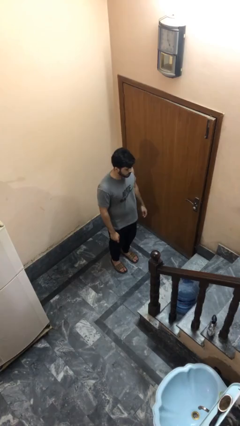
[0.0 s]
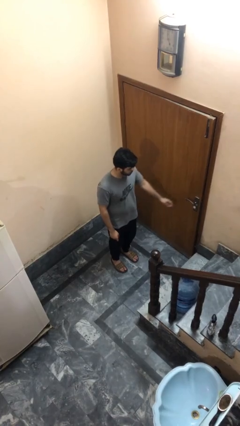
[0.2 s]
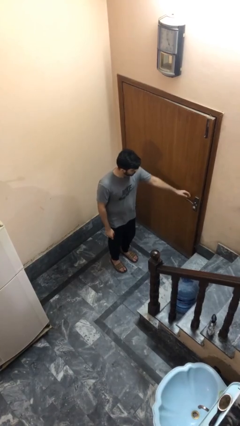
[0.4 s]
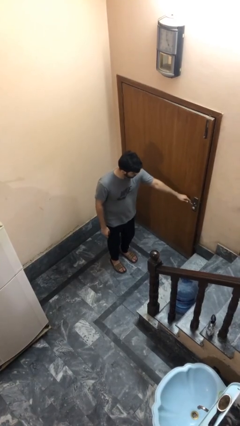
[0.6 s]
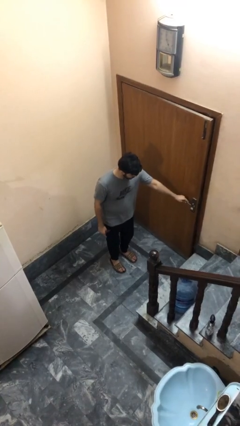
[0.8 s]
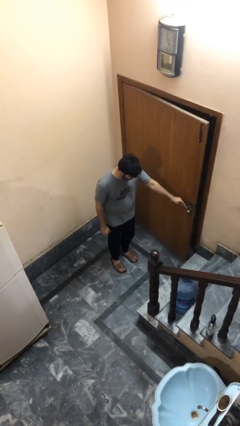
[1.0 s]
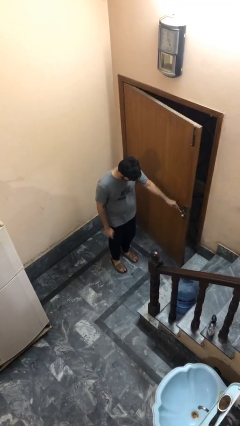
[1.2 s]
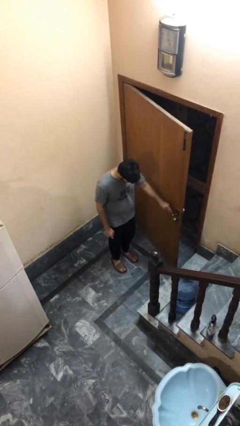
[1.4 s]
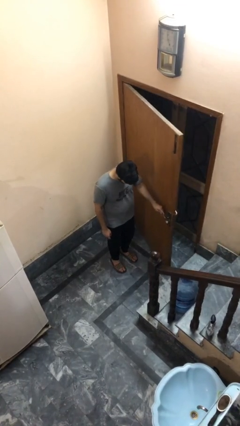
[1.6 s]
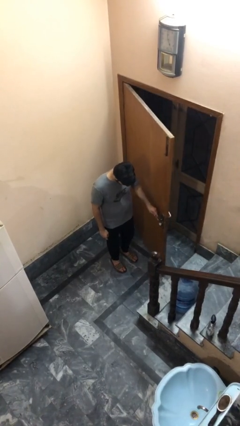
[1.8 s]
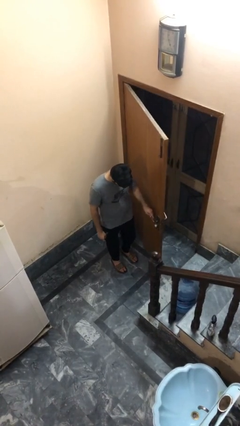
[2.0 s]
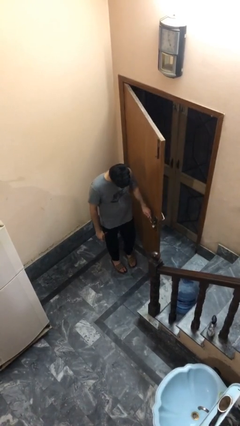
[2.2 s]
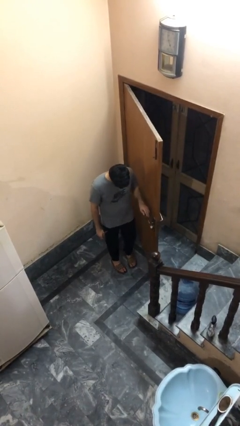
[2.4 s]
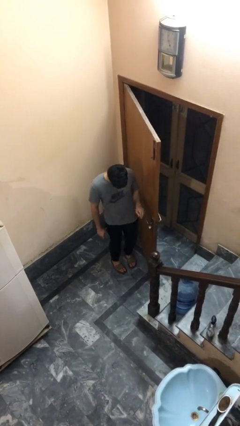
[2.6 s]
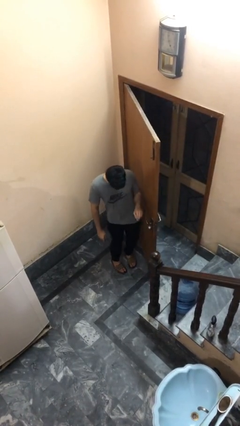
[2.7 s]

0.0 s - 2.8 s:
person opens facility door

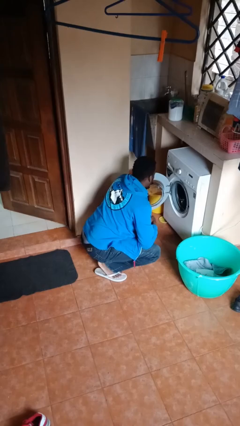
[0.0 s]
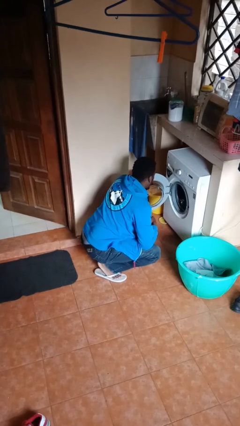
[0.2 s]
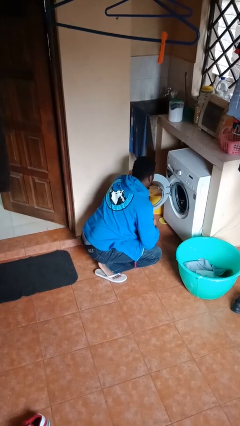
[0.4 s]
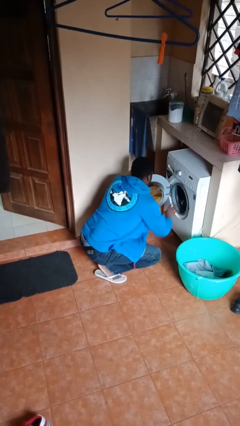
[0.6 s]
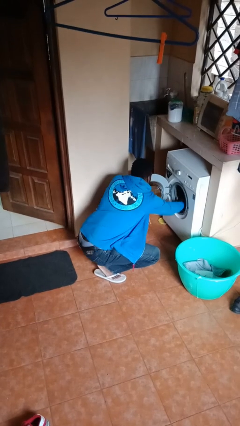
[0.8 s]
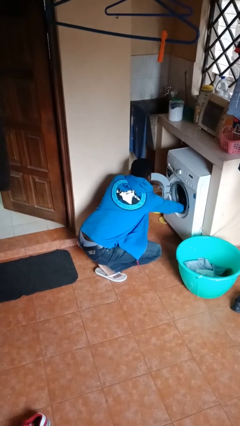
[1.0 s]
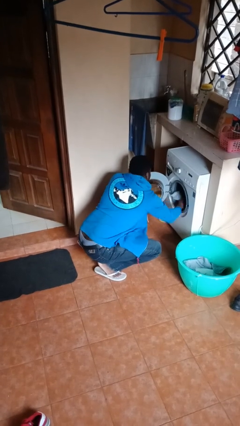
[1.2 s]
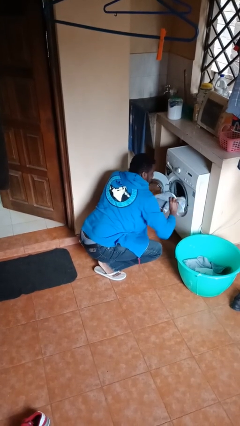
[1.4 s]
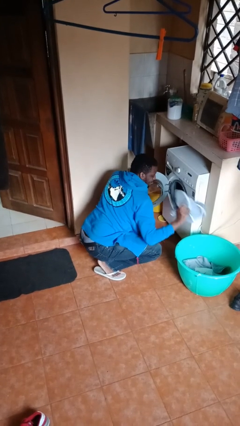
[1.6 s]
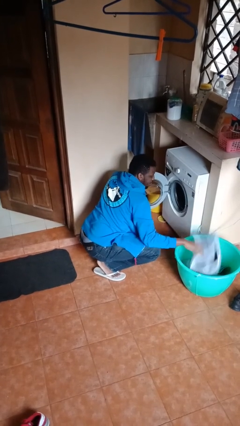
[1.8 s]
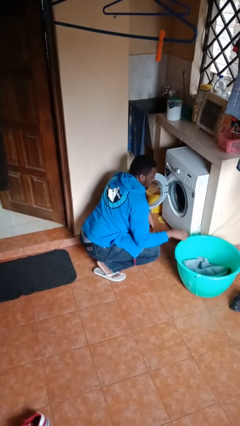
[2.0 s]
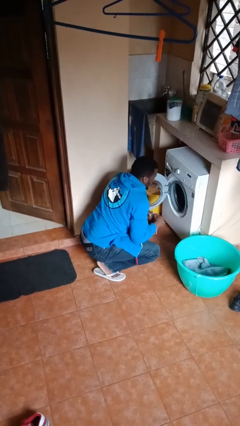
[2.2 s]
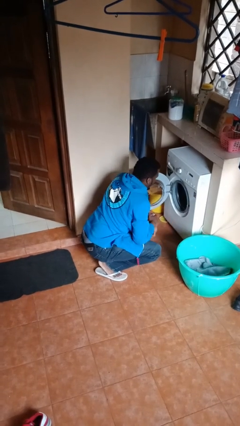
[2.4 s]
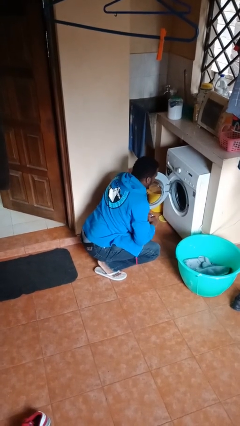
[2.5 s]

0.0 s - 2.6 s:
person loads clotheswasher

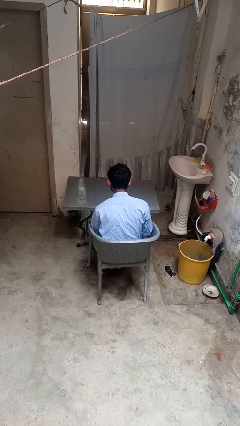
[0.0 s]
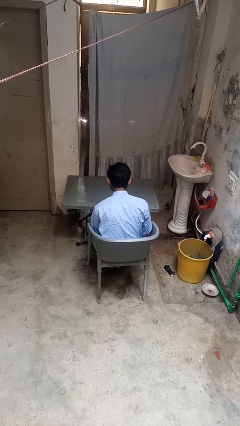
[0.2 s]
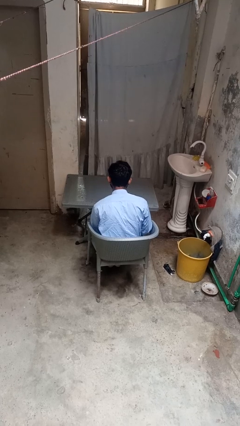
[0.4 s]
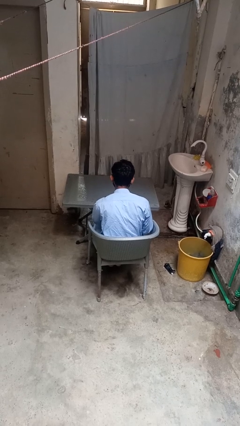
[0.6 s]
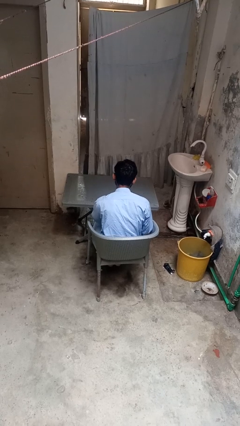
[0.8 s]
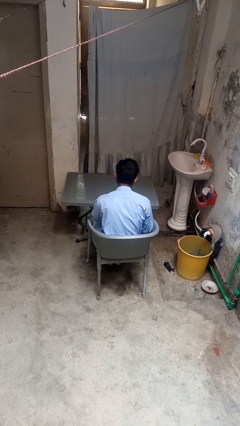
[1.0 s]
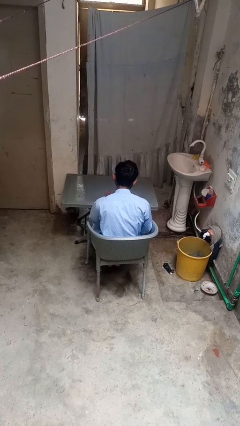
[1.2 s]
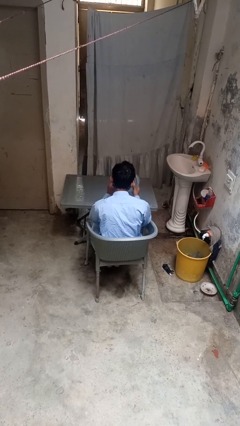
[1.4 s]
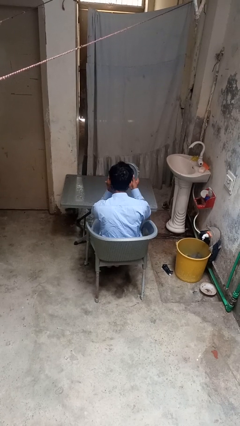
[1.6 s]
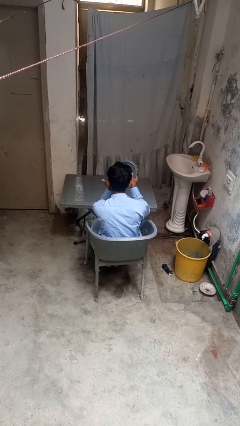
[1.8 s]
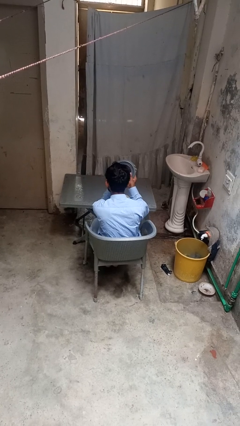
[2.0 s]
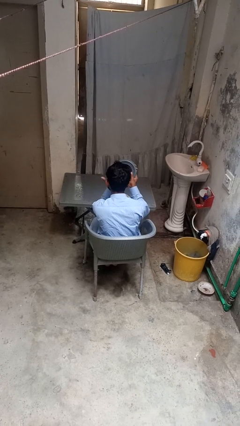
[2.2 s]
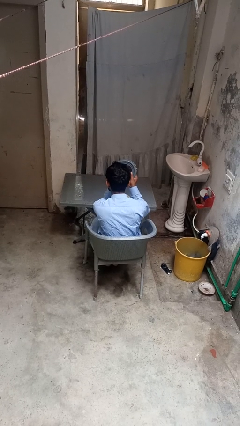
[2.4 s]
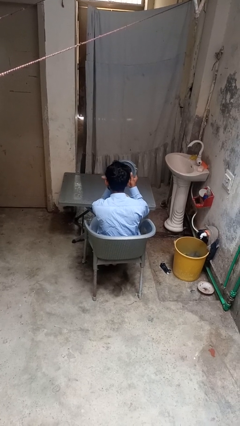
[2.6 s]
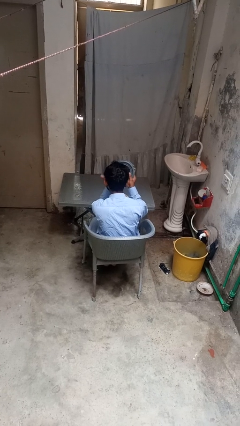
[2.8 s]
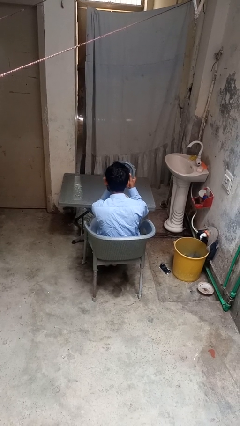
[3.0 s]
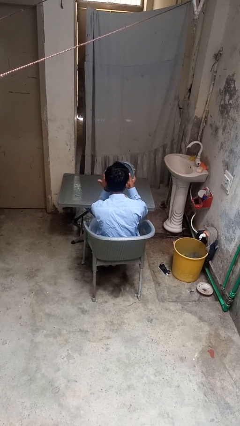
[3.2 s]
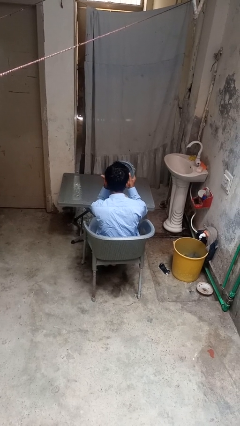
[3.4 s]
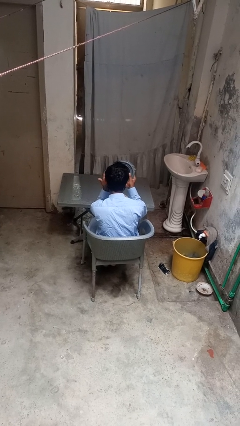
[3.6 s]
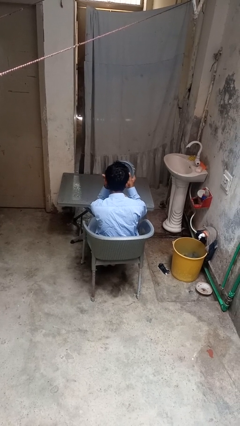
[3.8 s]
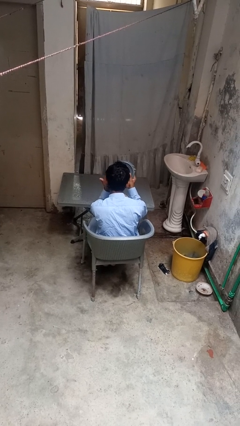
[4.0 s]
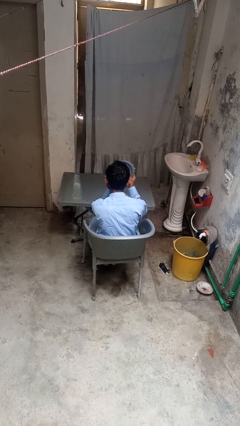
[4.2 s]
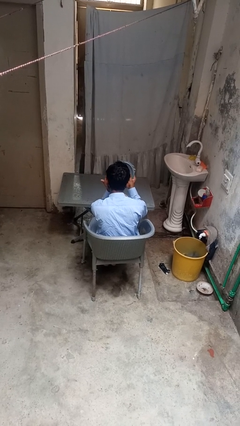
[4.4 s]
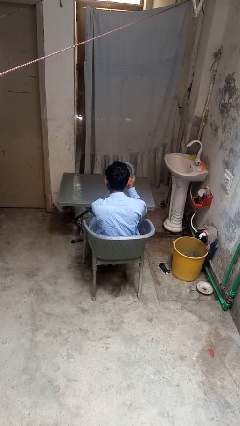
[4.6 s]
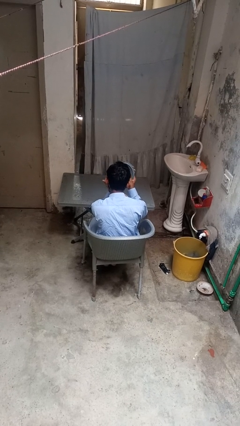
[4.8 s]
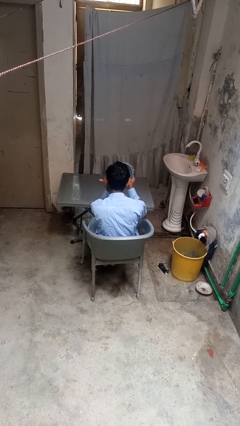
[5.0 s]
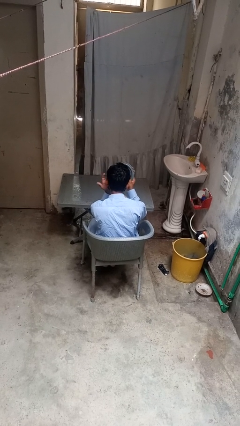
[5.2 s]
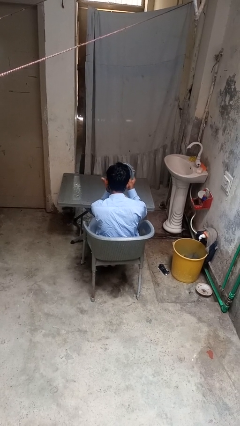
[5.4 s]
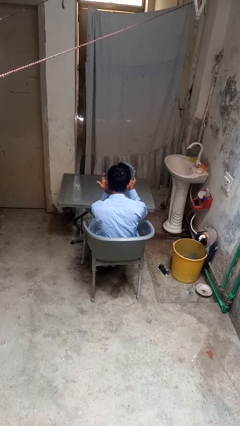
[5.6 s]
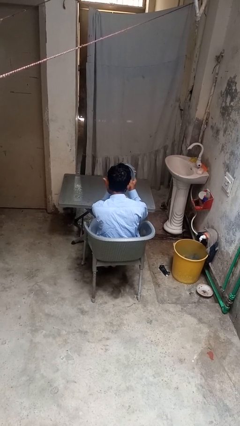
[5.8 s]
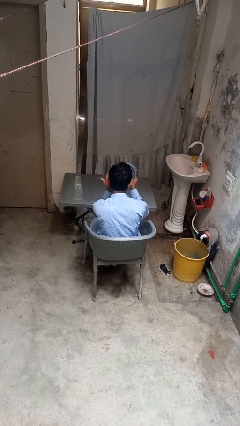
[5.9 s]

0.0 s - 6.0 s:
person applies foundation makeup

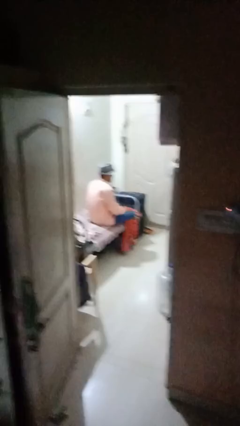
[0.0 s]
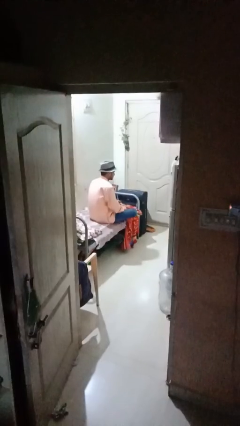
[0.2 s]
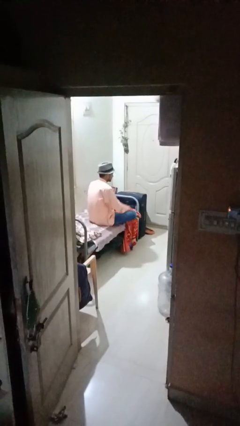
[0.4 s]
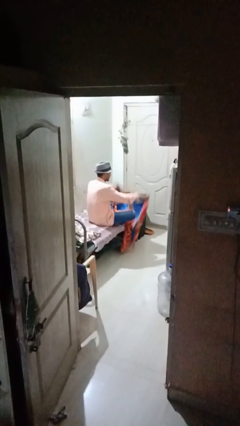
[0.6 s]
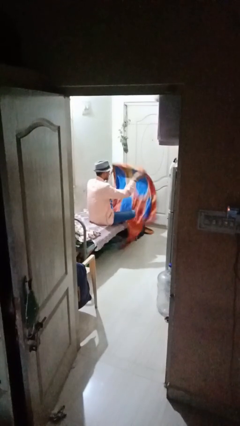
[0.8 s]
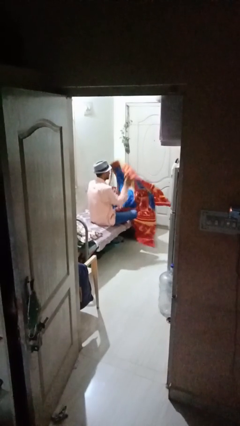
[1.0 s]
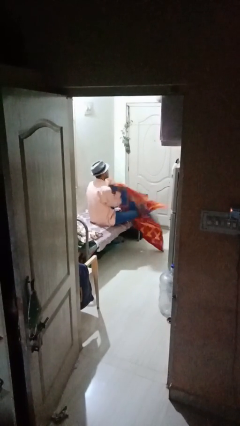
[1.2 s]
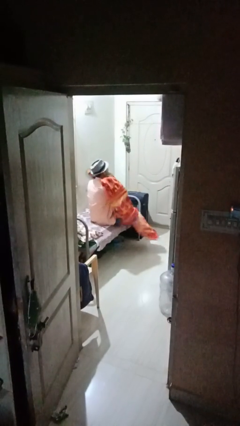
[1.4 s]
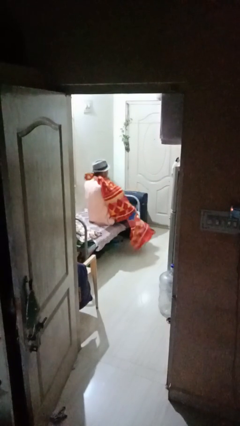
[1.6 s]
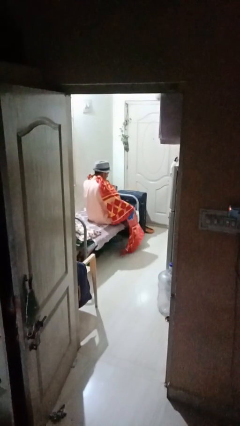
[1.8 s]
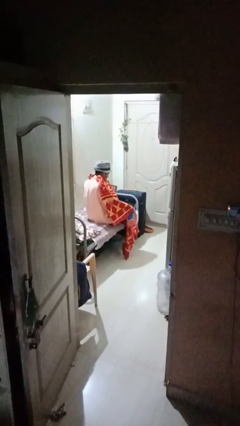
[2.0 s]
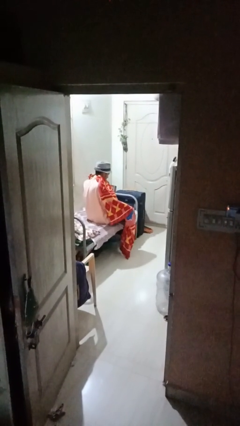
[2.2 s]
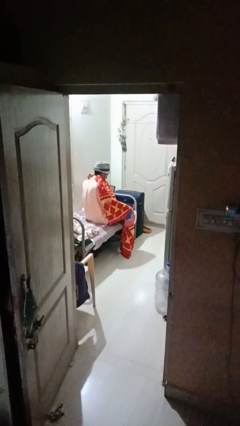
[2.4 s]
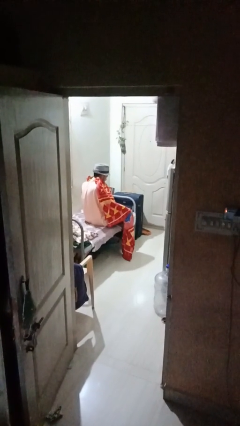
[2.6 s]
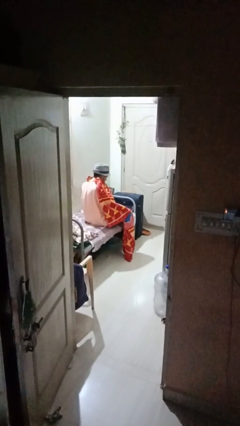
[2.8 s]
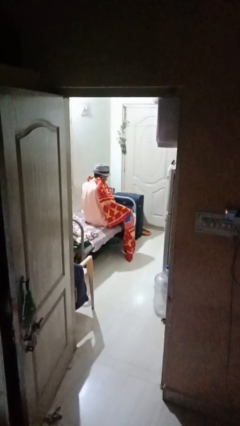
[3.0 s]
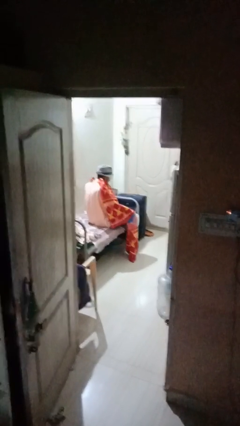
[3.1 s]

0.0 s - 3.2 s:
person covers with blanket

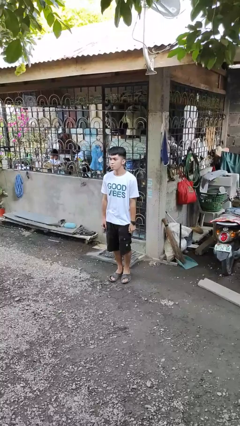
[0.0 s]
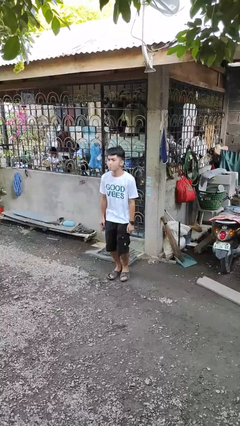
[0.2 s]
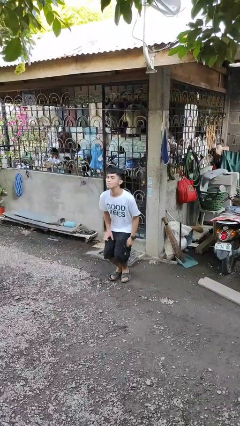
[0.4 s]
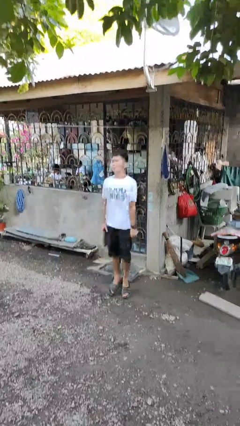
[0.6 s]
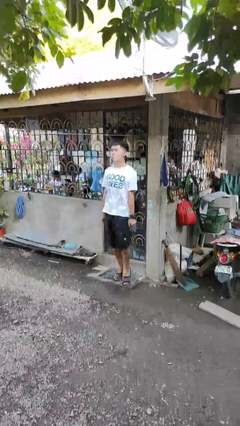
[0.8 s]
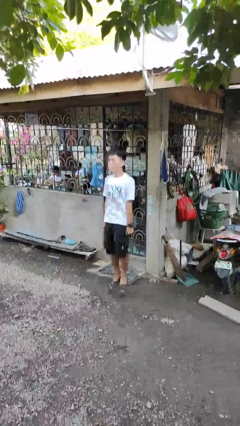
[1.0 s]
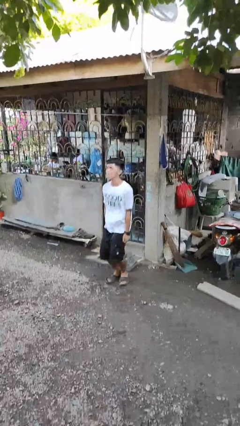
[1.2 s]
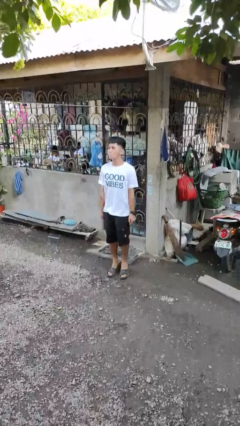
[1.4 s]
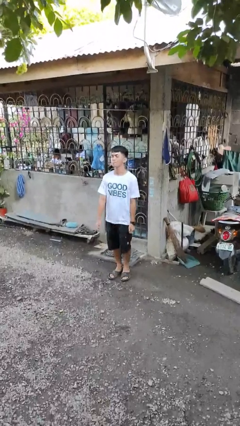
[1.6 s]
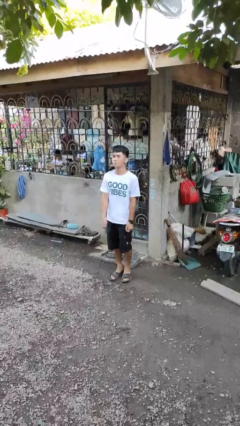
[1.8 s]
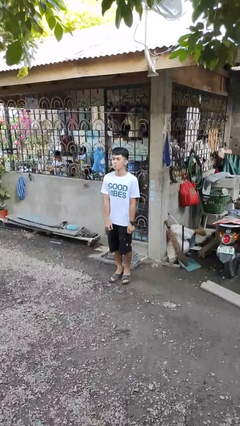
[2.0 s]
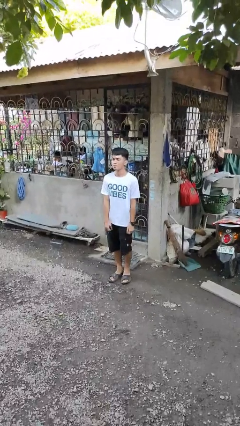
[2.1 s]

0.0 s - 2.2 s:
person jumps

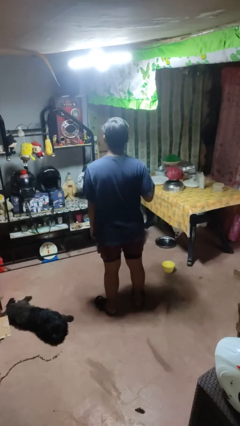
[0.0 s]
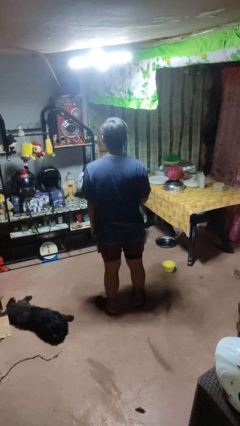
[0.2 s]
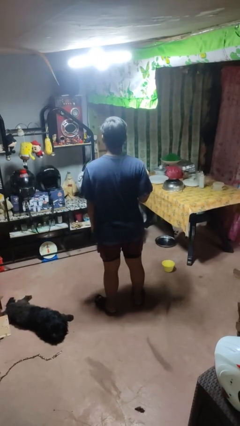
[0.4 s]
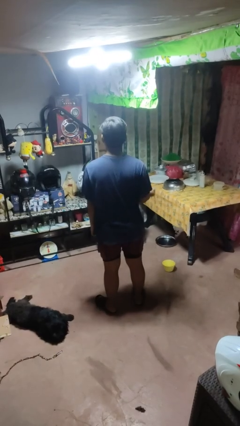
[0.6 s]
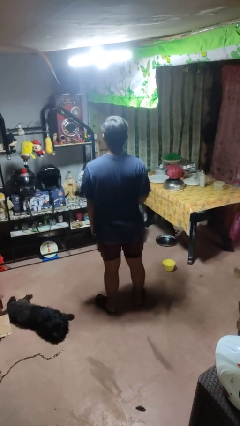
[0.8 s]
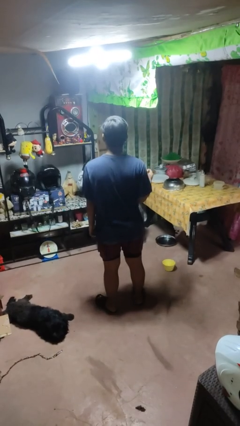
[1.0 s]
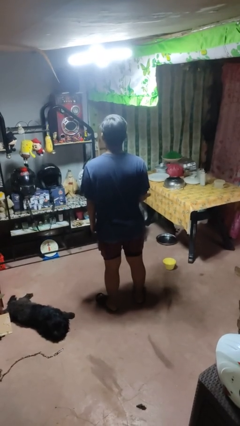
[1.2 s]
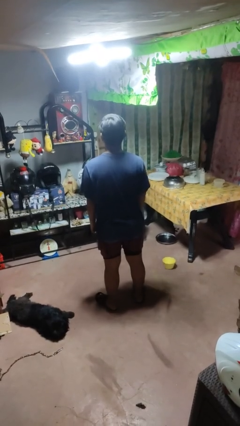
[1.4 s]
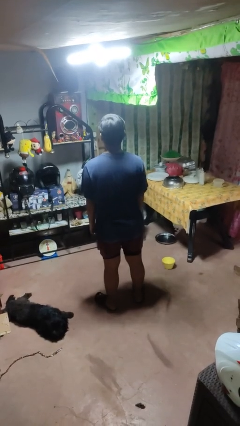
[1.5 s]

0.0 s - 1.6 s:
person snaps fingers
